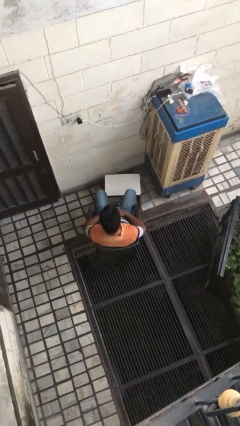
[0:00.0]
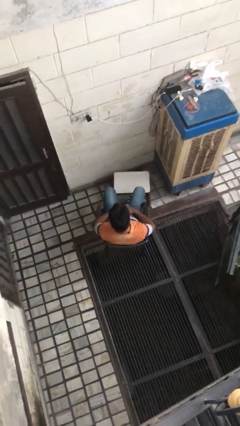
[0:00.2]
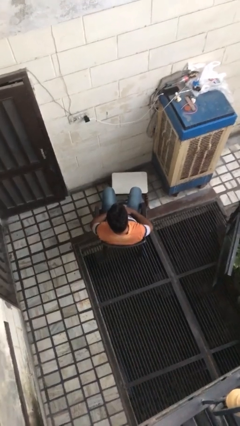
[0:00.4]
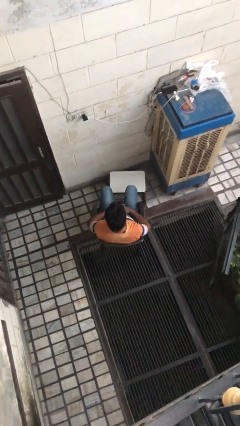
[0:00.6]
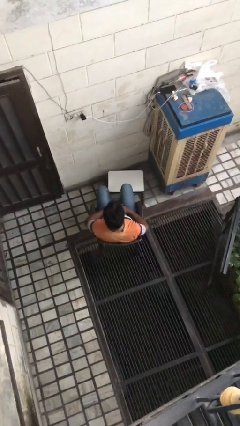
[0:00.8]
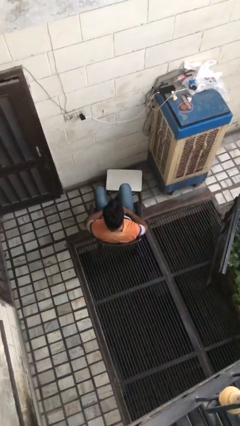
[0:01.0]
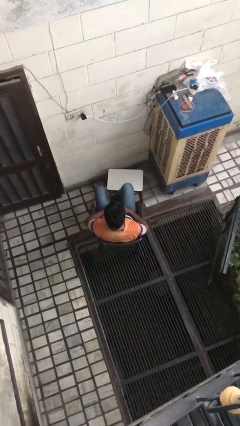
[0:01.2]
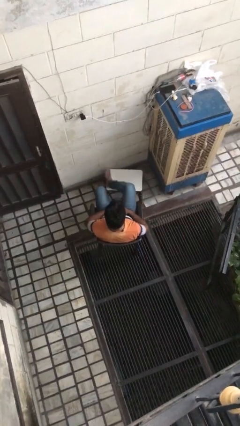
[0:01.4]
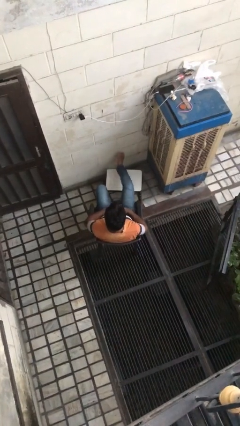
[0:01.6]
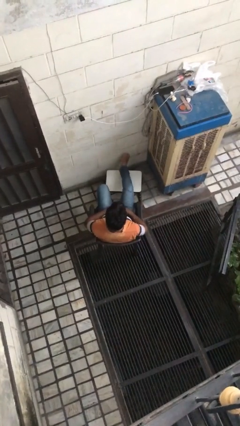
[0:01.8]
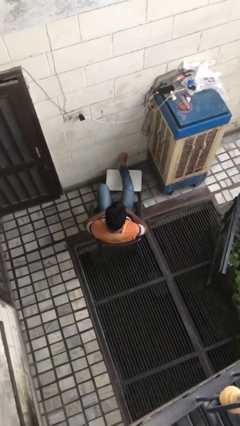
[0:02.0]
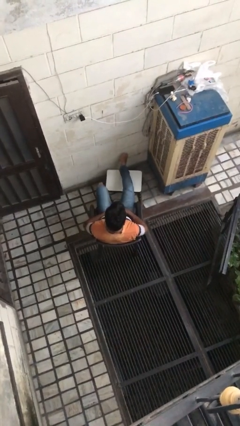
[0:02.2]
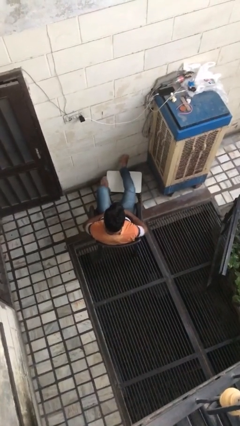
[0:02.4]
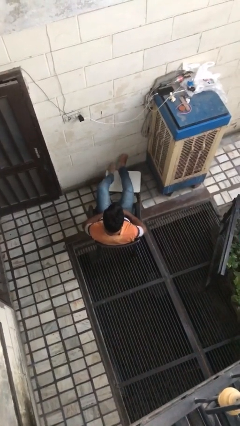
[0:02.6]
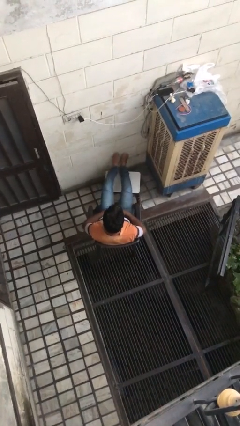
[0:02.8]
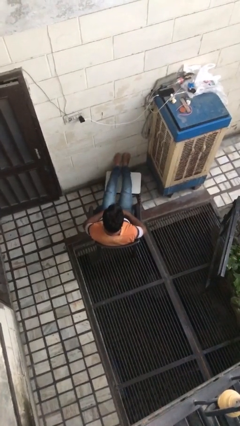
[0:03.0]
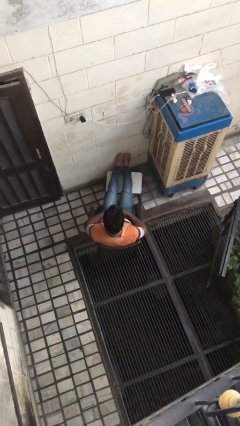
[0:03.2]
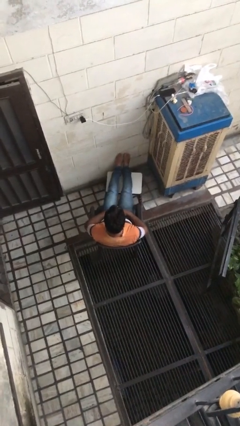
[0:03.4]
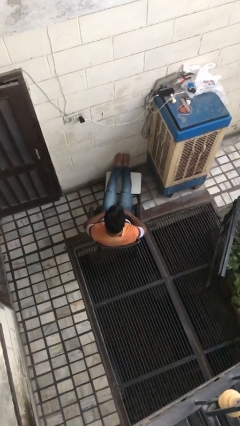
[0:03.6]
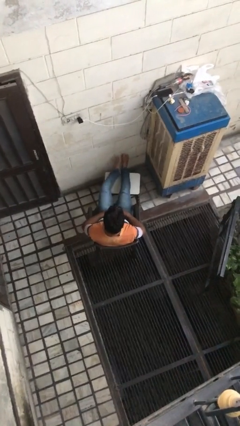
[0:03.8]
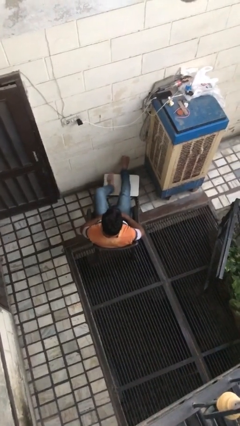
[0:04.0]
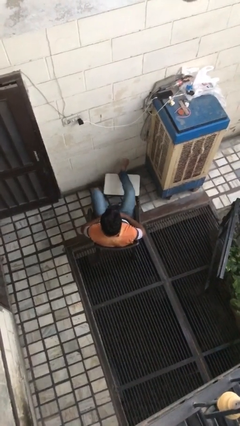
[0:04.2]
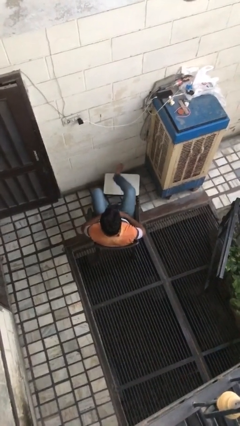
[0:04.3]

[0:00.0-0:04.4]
person puts feet up

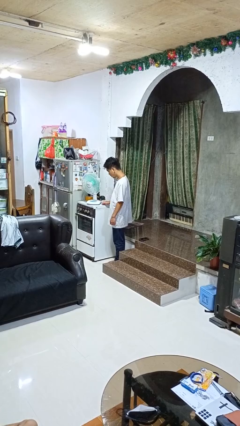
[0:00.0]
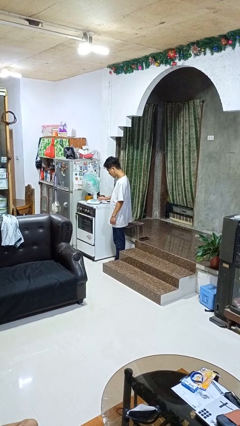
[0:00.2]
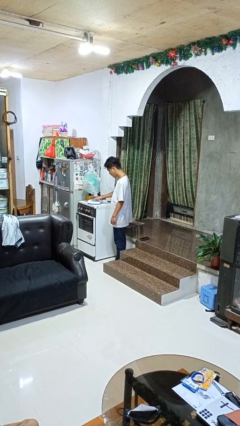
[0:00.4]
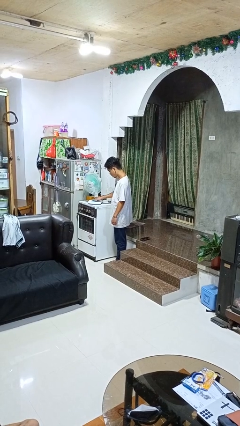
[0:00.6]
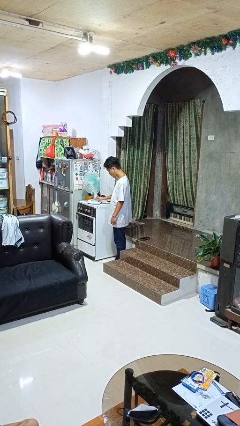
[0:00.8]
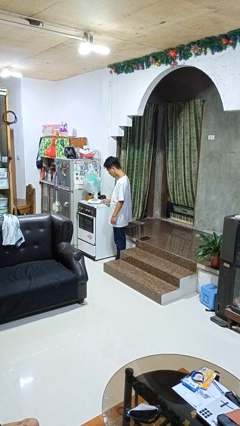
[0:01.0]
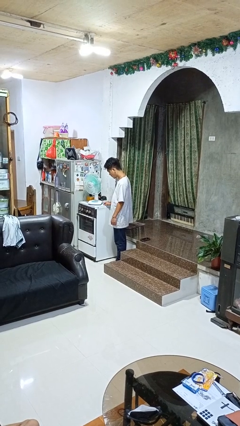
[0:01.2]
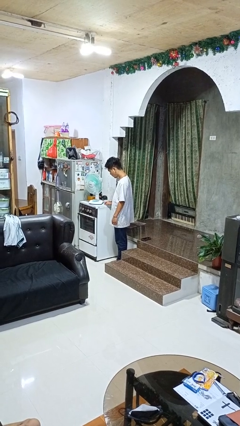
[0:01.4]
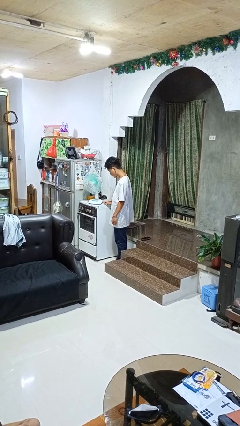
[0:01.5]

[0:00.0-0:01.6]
person turns off fan

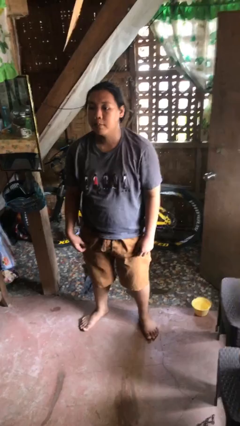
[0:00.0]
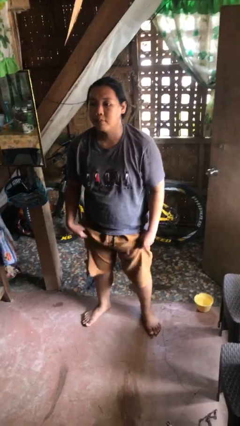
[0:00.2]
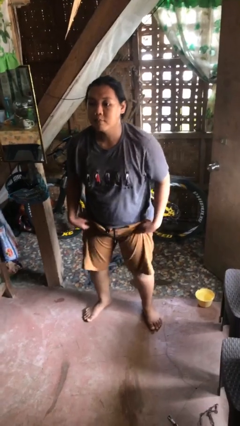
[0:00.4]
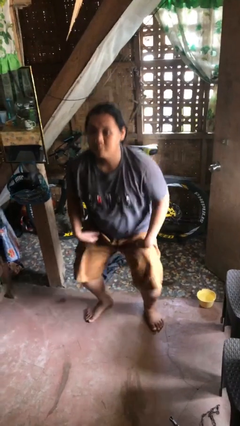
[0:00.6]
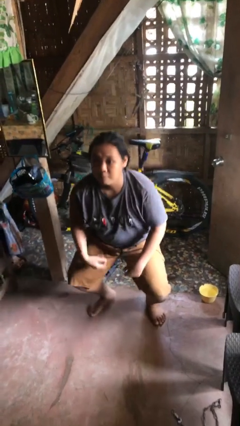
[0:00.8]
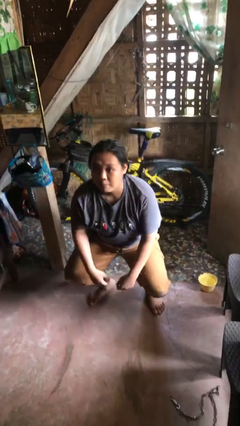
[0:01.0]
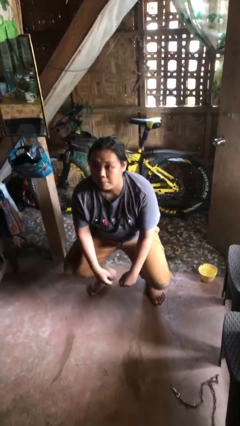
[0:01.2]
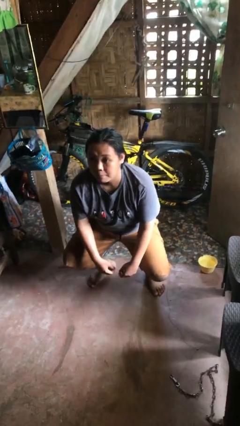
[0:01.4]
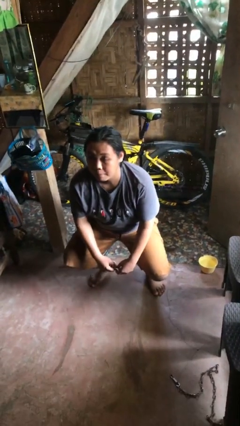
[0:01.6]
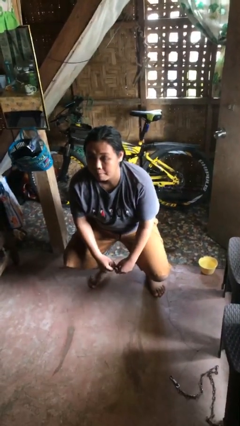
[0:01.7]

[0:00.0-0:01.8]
person squats

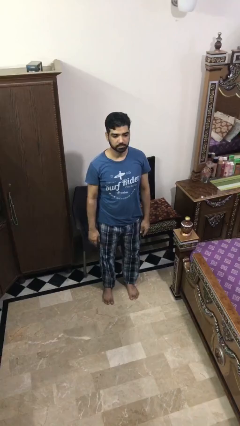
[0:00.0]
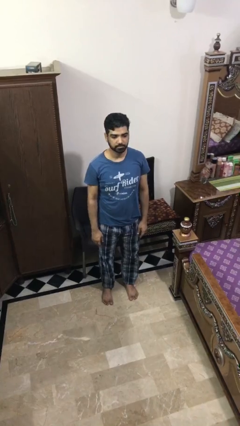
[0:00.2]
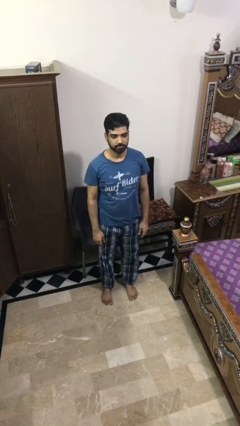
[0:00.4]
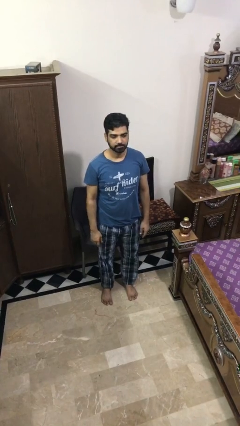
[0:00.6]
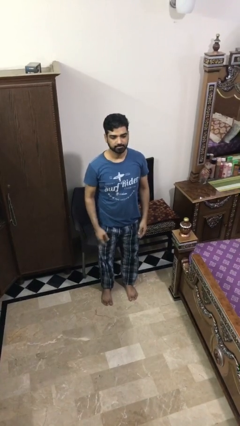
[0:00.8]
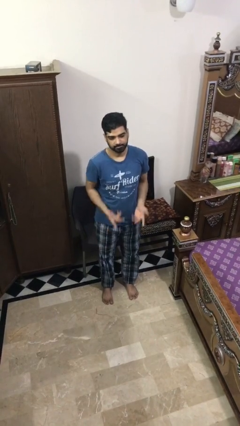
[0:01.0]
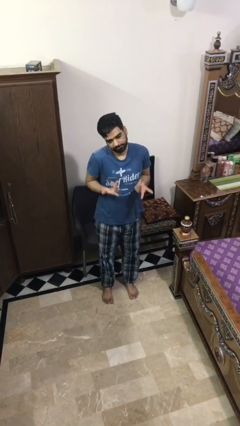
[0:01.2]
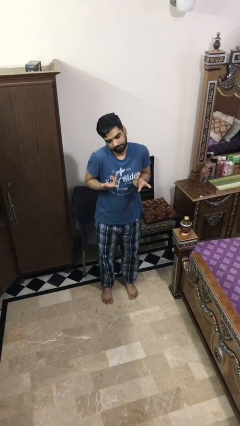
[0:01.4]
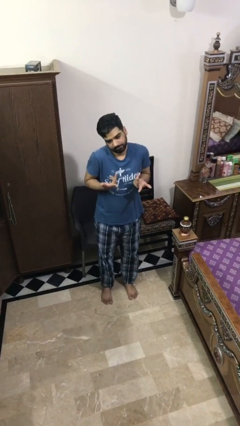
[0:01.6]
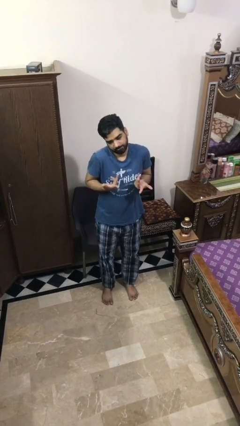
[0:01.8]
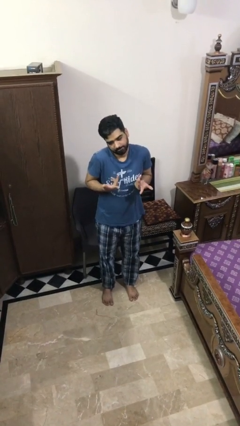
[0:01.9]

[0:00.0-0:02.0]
person shrugs

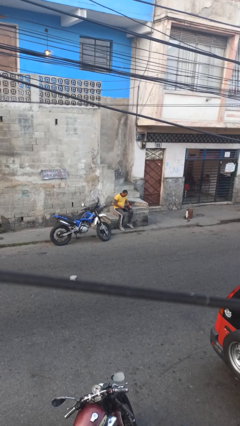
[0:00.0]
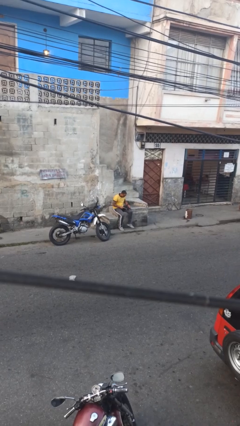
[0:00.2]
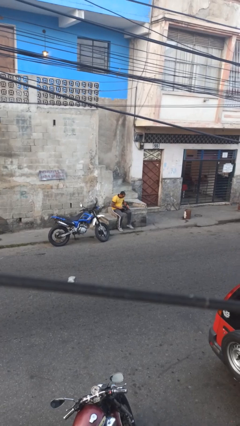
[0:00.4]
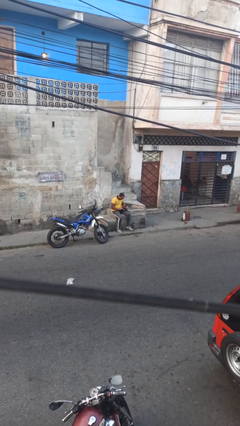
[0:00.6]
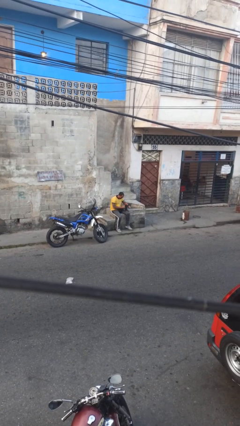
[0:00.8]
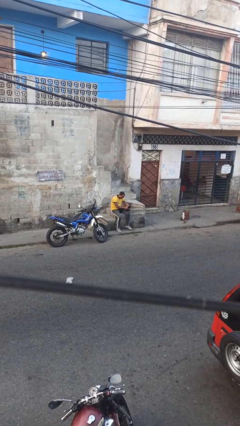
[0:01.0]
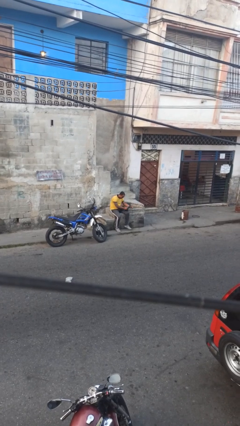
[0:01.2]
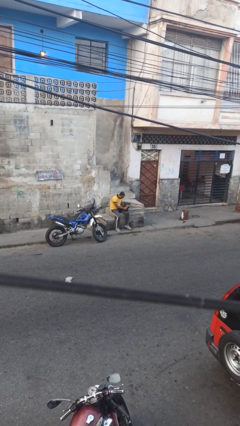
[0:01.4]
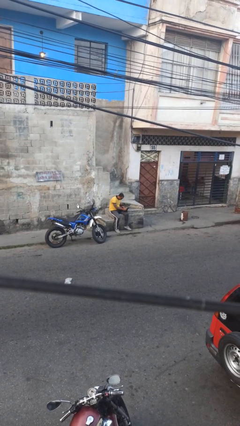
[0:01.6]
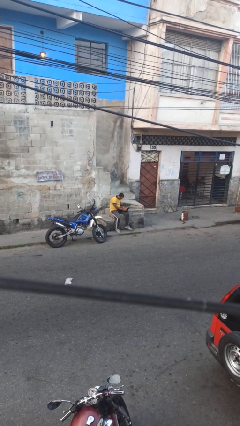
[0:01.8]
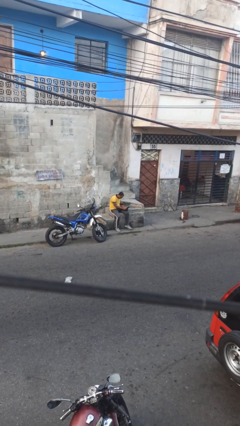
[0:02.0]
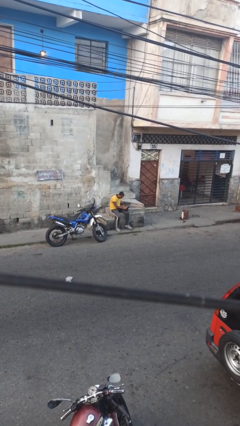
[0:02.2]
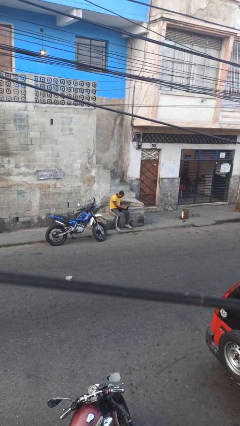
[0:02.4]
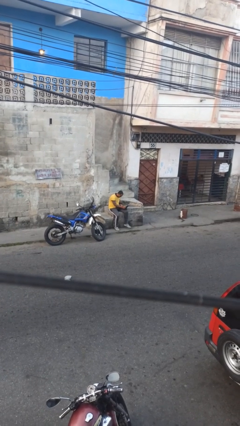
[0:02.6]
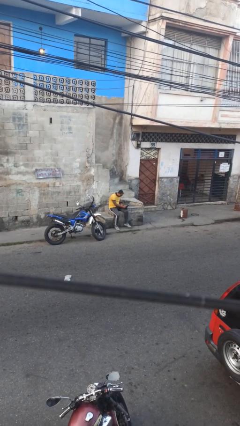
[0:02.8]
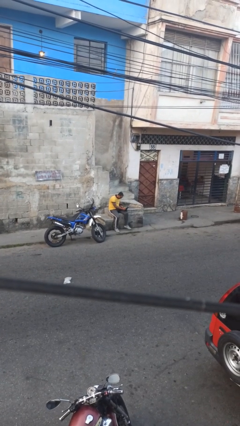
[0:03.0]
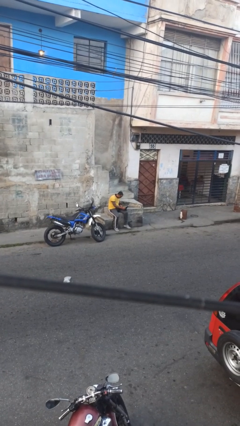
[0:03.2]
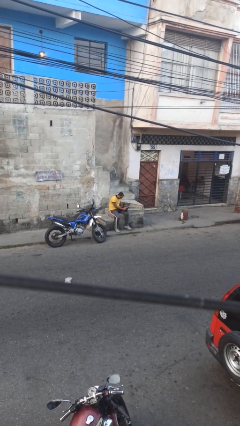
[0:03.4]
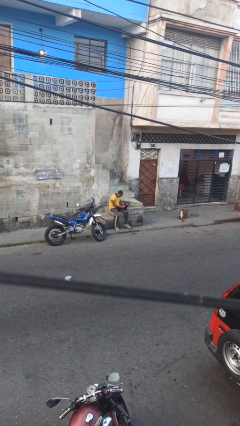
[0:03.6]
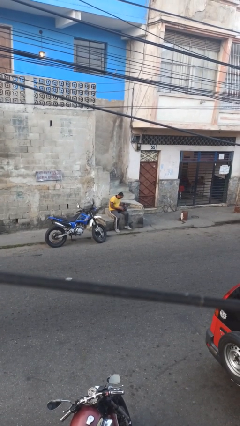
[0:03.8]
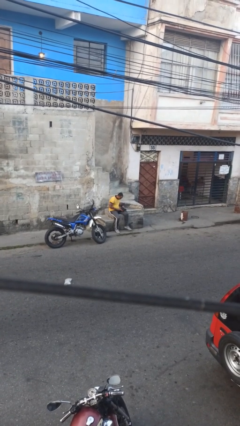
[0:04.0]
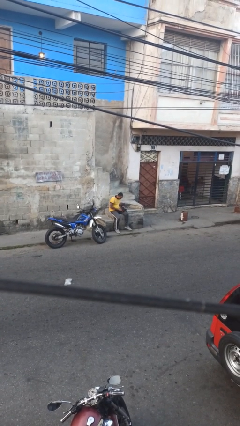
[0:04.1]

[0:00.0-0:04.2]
person interacts with laptop

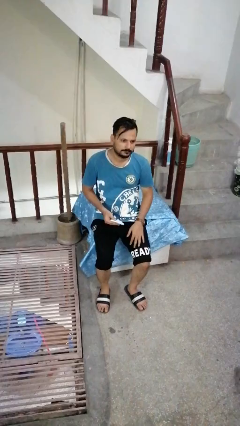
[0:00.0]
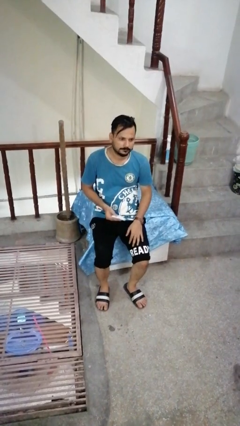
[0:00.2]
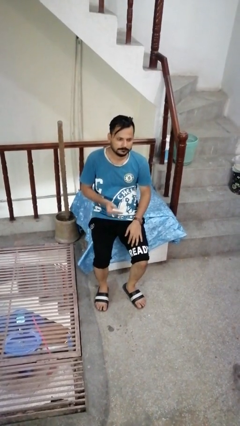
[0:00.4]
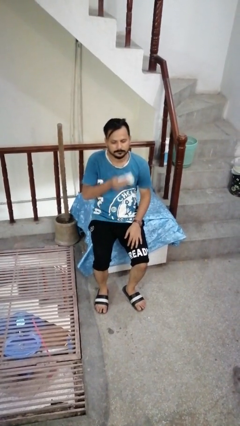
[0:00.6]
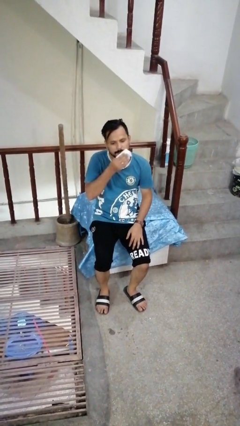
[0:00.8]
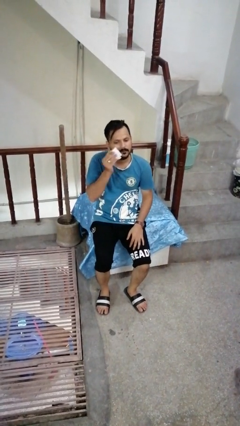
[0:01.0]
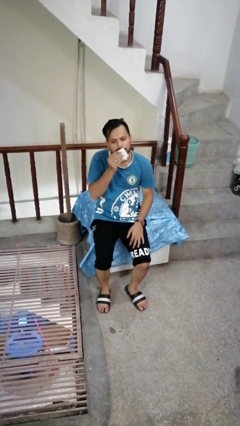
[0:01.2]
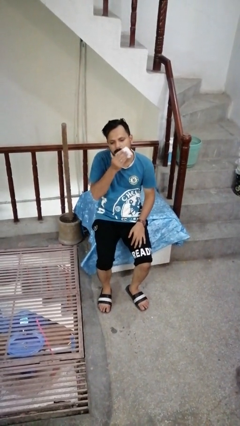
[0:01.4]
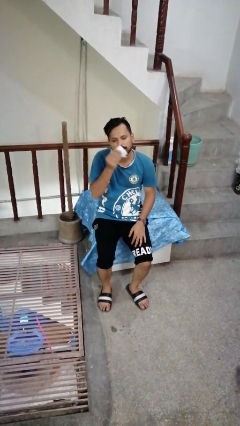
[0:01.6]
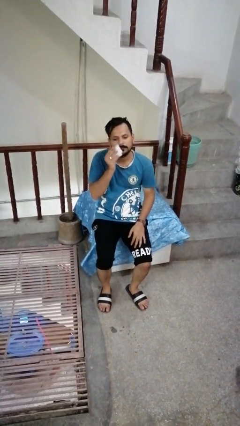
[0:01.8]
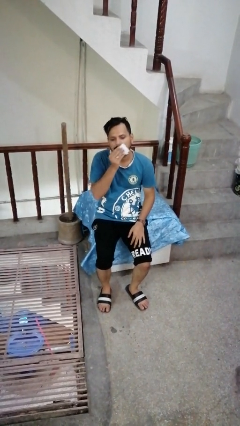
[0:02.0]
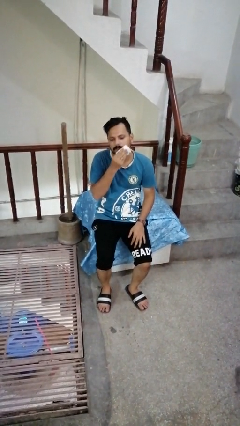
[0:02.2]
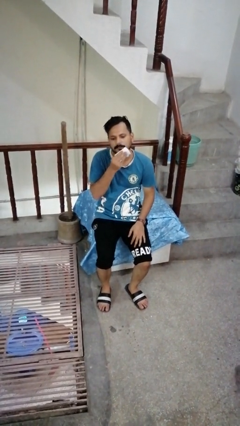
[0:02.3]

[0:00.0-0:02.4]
person wipes mouth with napkin

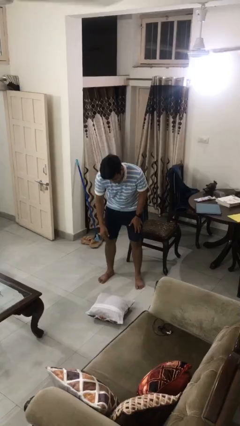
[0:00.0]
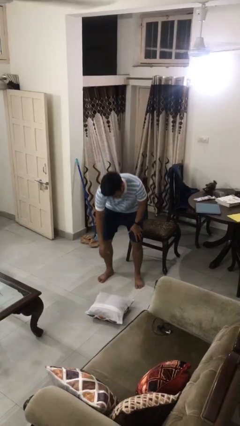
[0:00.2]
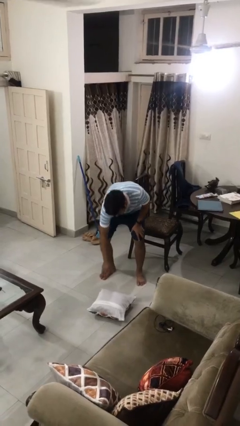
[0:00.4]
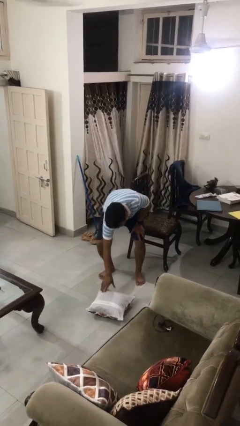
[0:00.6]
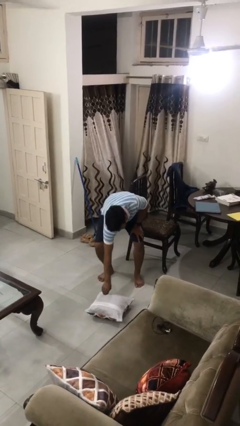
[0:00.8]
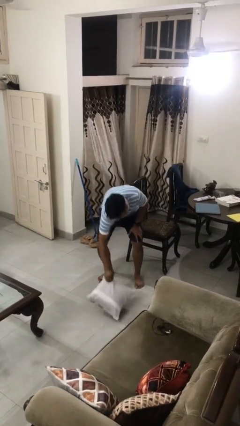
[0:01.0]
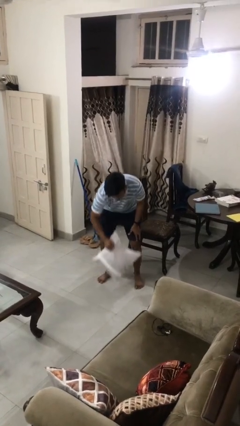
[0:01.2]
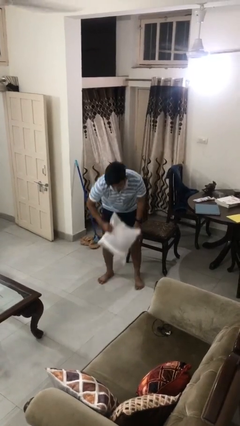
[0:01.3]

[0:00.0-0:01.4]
person picks up object from floor
